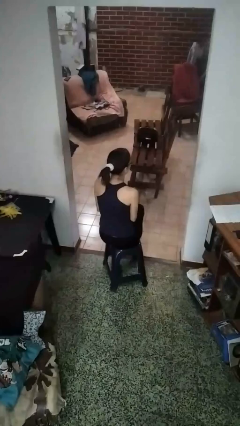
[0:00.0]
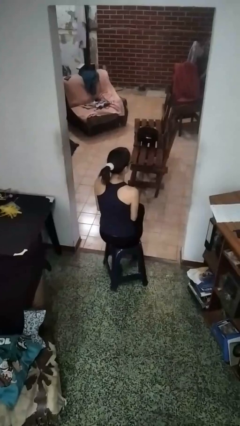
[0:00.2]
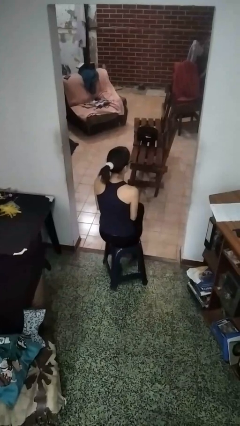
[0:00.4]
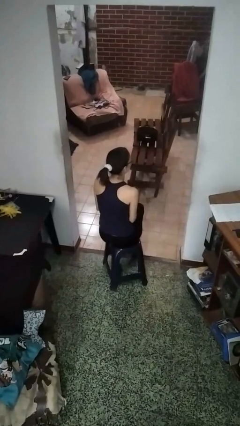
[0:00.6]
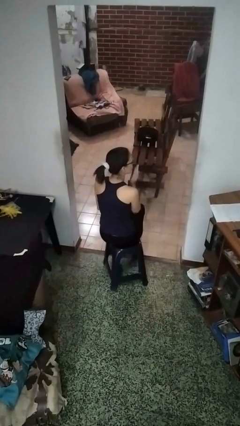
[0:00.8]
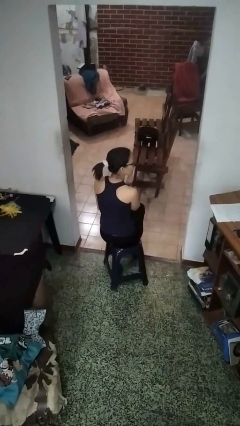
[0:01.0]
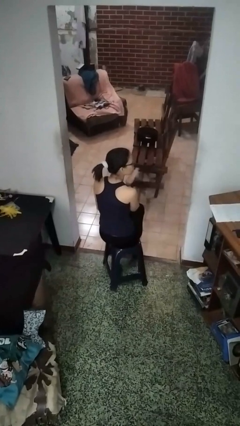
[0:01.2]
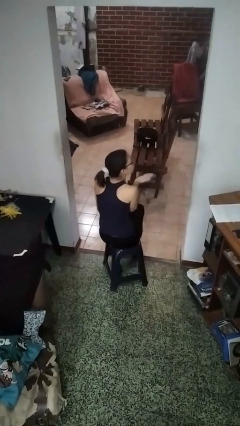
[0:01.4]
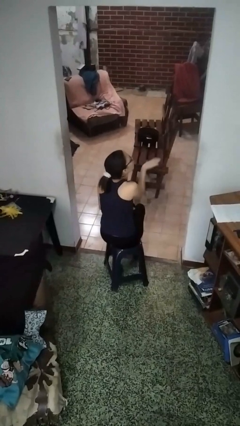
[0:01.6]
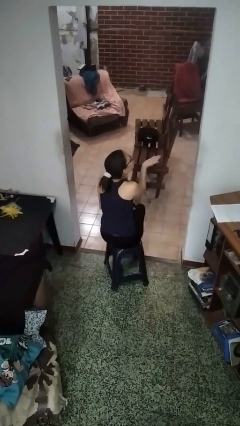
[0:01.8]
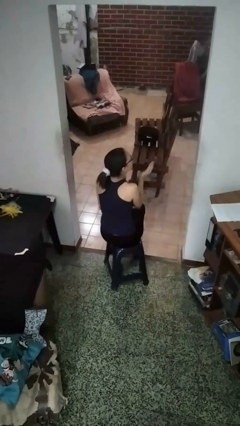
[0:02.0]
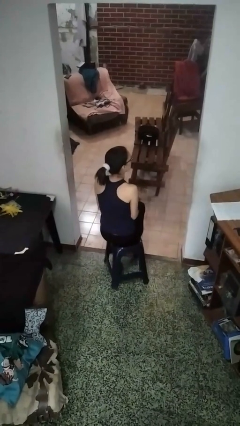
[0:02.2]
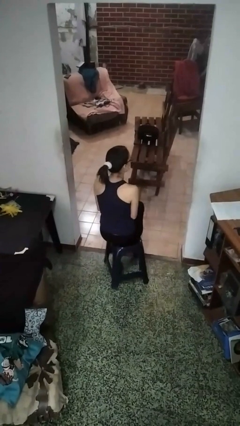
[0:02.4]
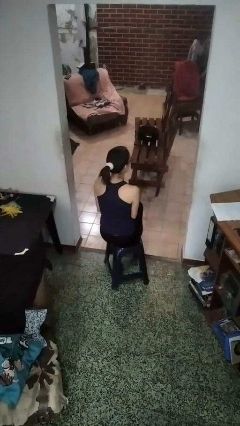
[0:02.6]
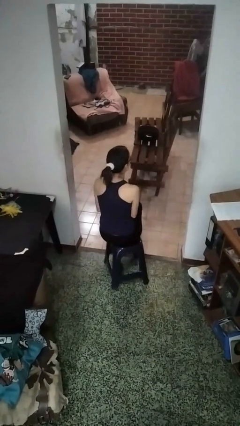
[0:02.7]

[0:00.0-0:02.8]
person gestures blow kiss

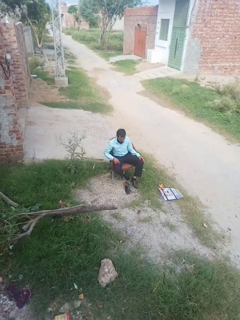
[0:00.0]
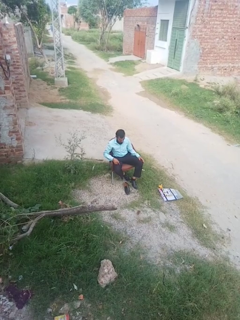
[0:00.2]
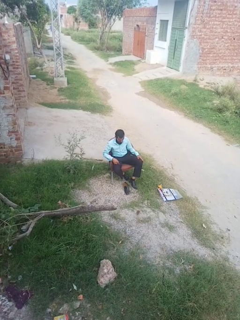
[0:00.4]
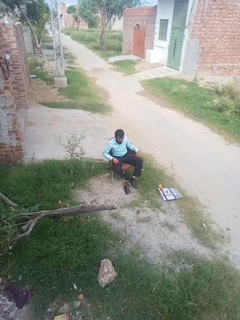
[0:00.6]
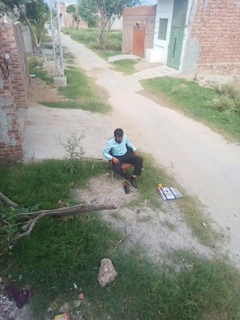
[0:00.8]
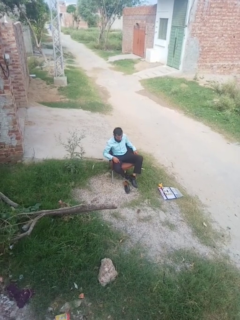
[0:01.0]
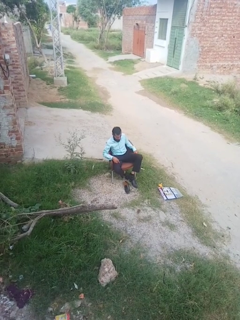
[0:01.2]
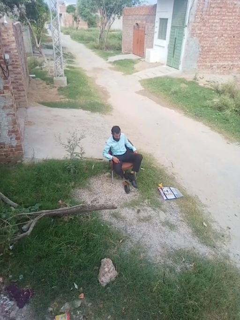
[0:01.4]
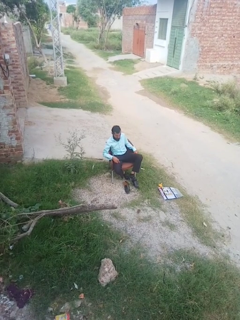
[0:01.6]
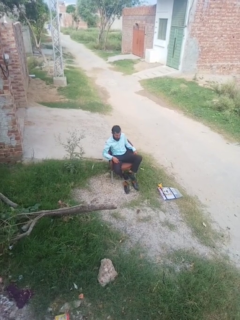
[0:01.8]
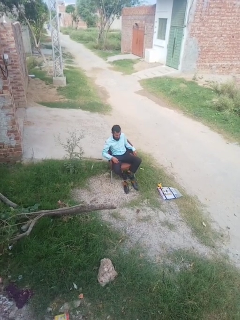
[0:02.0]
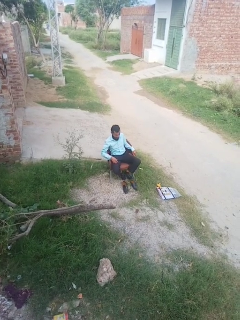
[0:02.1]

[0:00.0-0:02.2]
person takes off shoes

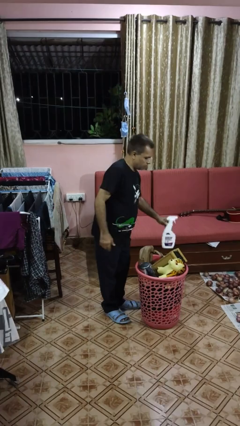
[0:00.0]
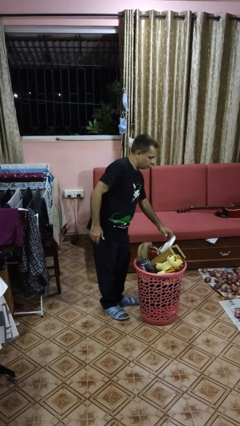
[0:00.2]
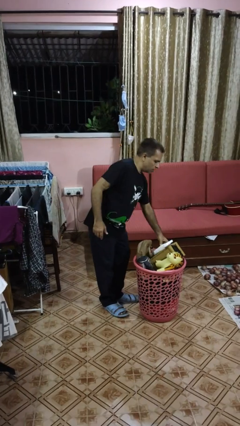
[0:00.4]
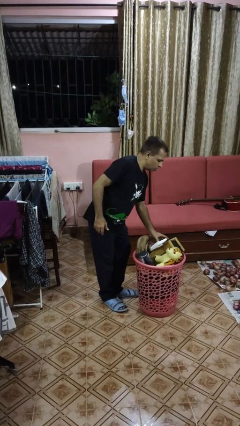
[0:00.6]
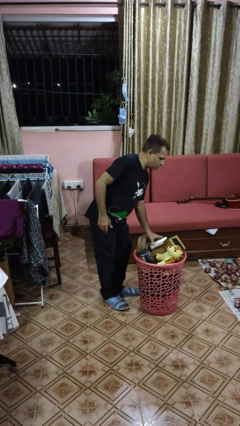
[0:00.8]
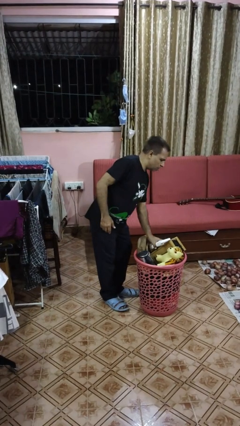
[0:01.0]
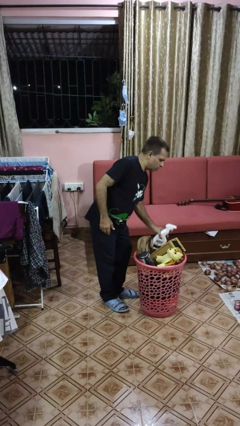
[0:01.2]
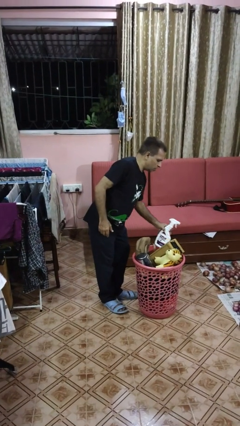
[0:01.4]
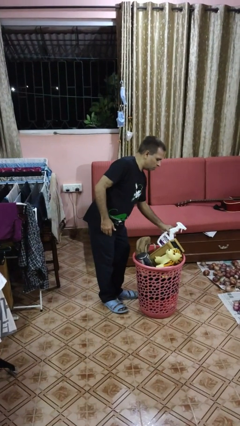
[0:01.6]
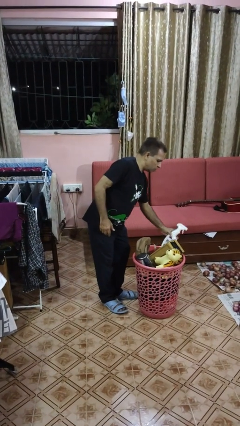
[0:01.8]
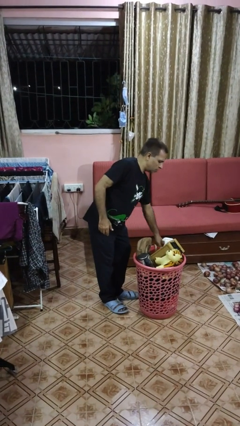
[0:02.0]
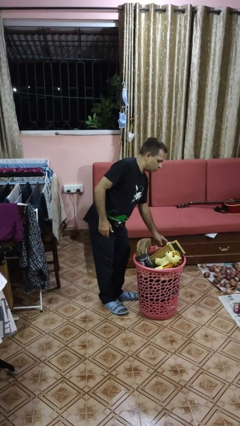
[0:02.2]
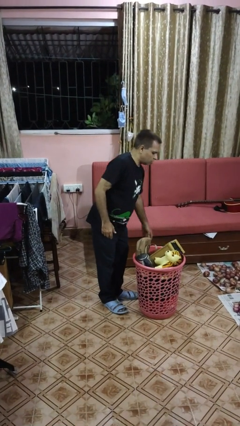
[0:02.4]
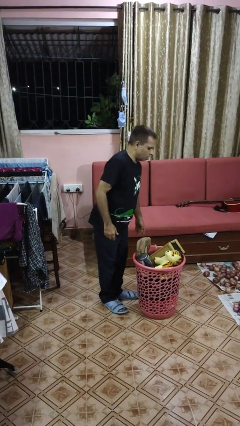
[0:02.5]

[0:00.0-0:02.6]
person puts object into basket

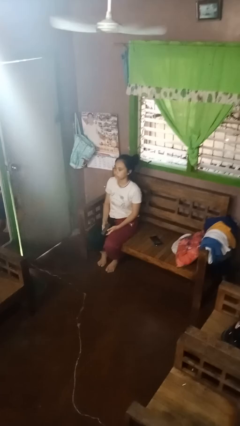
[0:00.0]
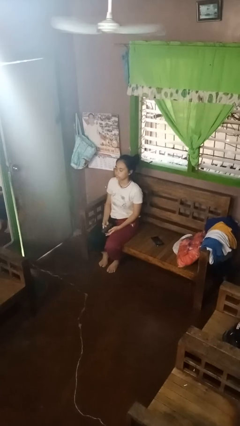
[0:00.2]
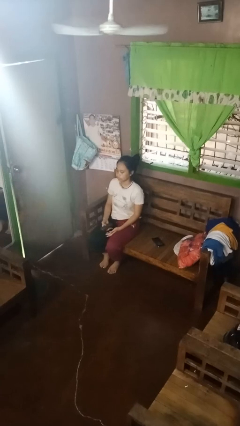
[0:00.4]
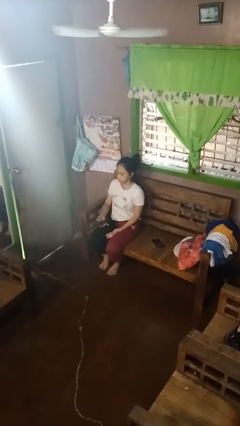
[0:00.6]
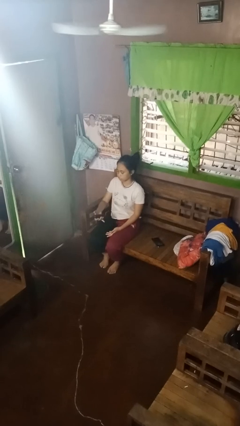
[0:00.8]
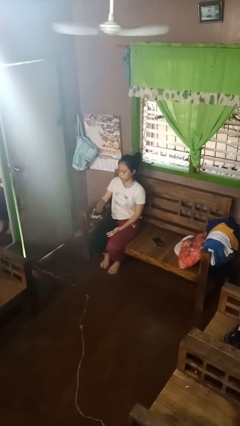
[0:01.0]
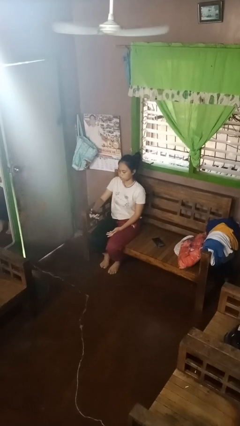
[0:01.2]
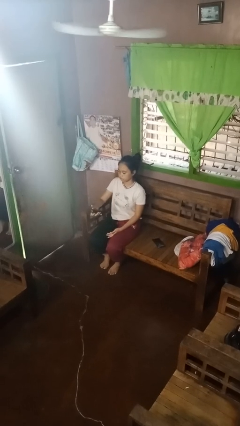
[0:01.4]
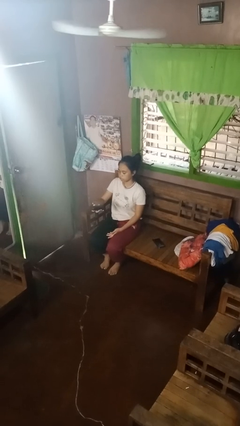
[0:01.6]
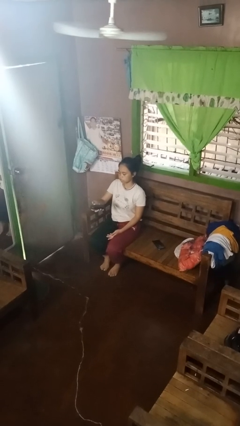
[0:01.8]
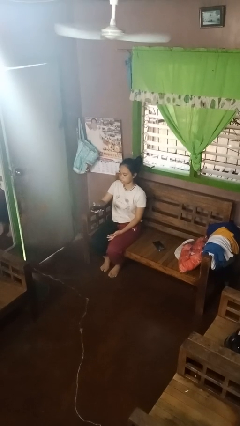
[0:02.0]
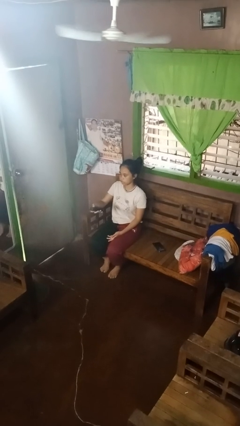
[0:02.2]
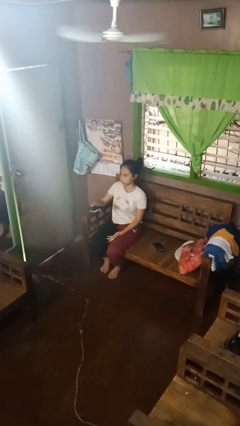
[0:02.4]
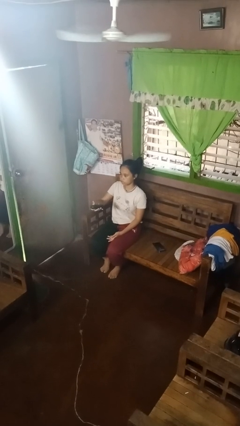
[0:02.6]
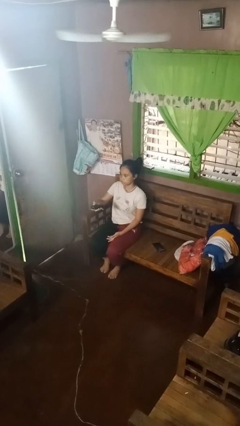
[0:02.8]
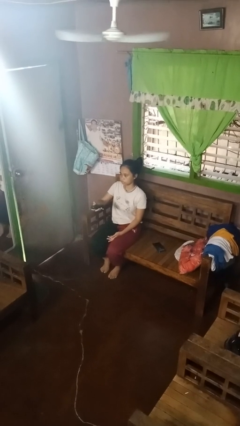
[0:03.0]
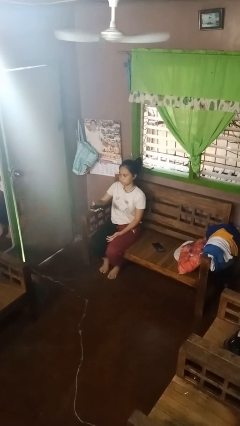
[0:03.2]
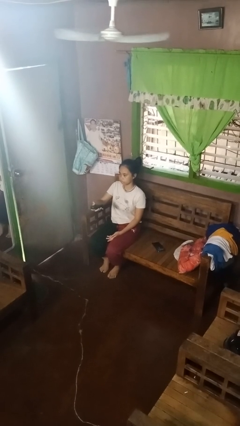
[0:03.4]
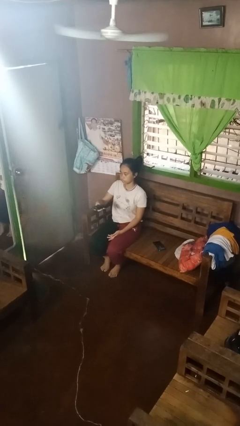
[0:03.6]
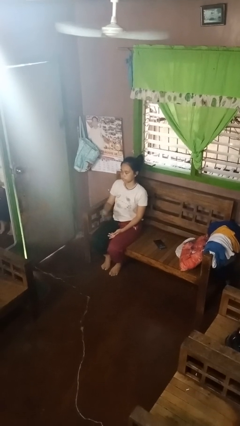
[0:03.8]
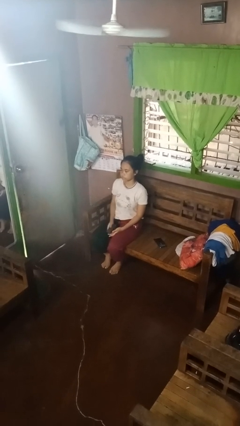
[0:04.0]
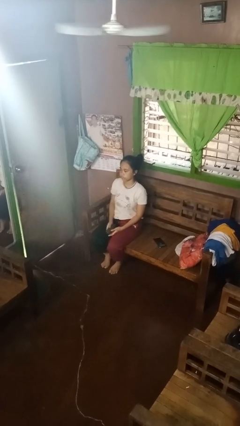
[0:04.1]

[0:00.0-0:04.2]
person uses television remote

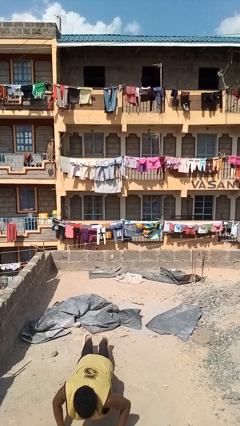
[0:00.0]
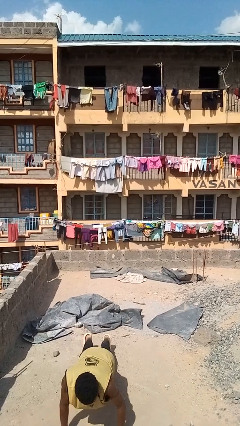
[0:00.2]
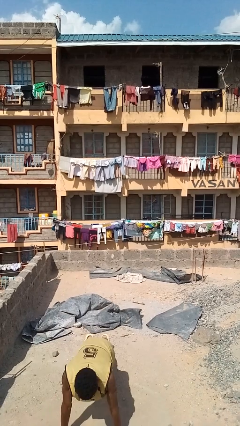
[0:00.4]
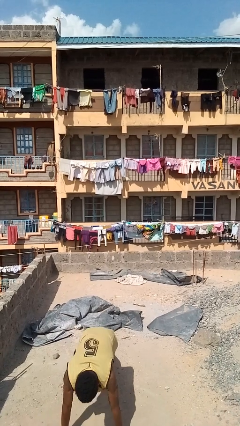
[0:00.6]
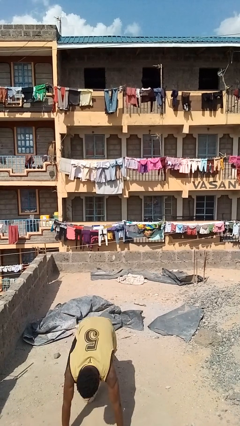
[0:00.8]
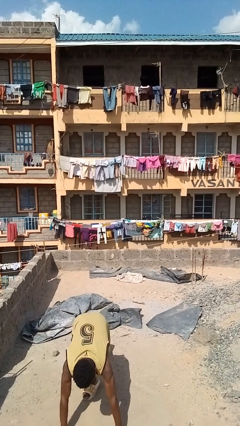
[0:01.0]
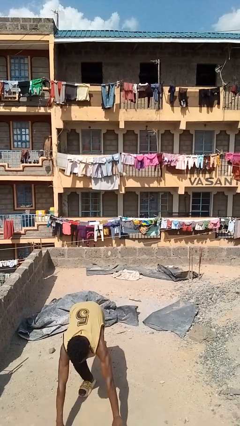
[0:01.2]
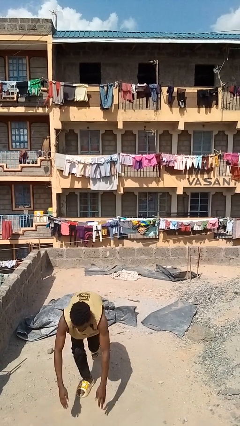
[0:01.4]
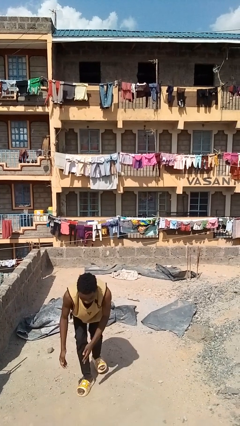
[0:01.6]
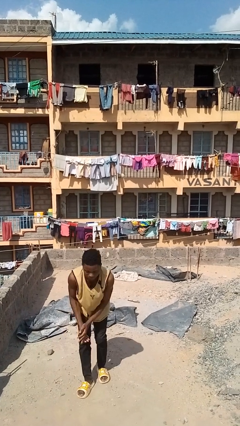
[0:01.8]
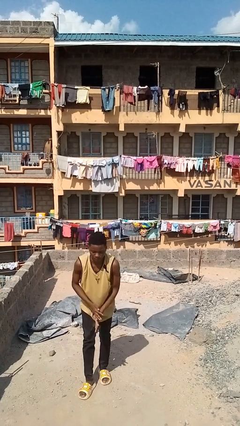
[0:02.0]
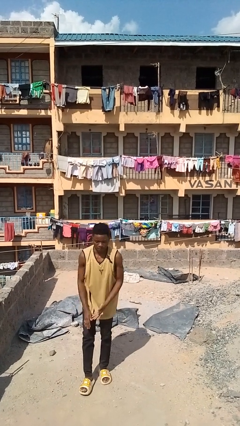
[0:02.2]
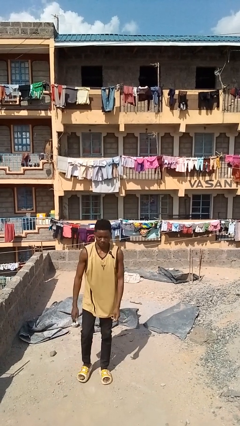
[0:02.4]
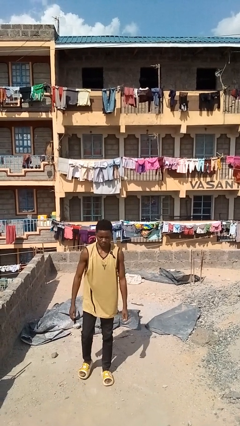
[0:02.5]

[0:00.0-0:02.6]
person stands up from floor

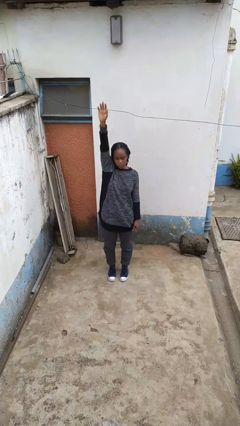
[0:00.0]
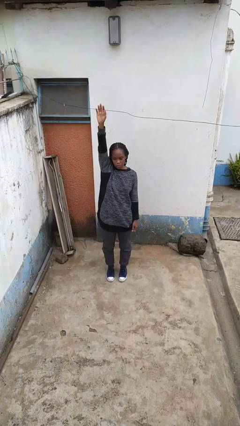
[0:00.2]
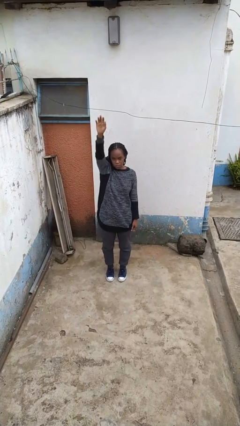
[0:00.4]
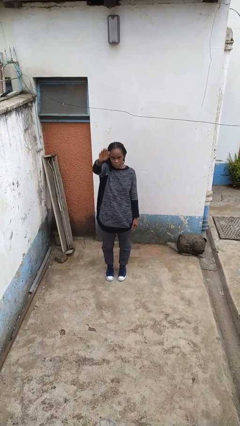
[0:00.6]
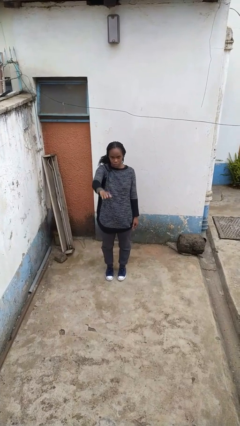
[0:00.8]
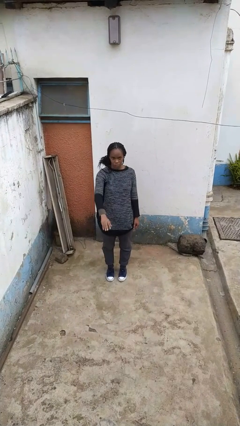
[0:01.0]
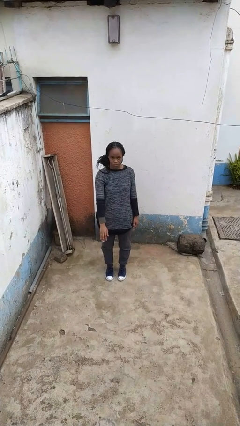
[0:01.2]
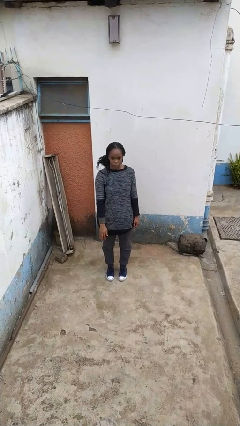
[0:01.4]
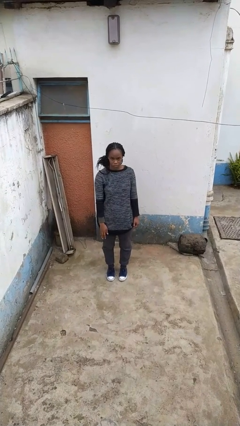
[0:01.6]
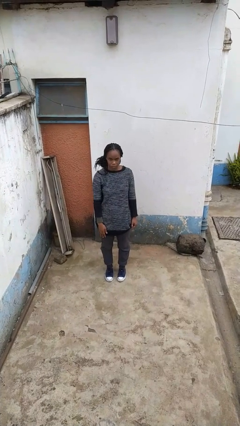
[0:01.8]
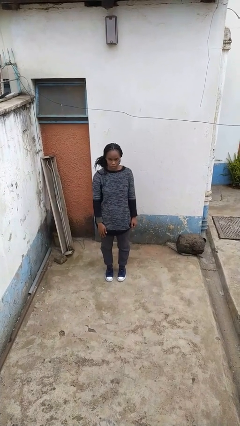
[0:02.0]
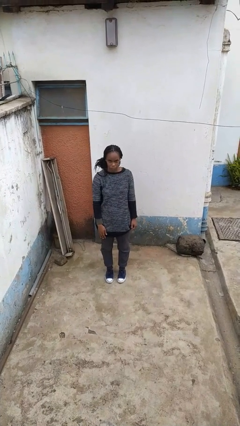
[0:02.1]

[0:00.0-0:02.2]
person gestures lower hand

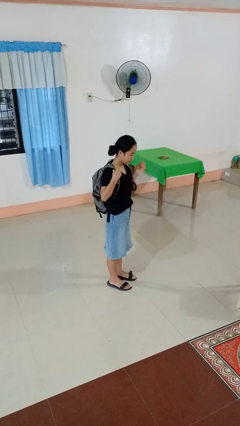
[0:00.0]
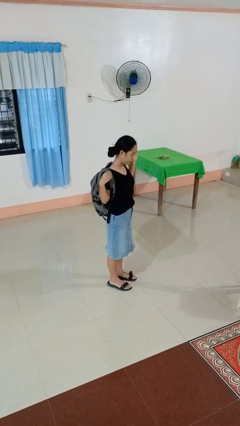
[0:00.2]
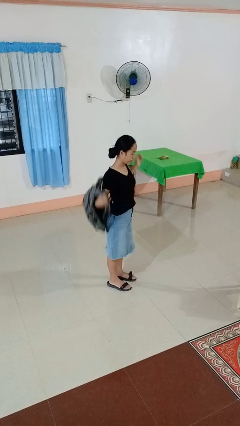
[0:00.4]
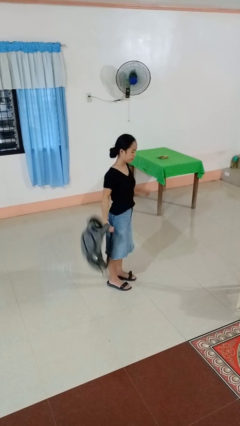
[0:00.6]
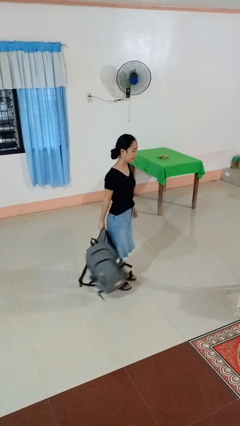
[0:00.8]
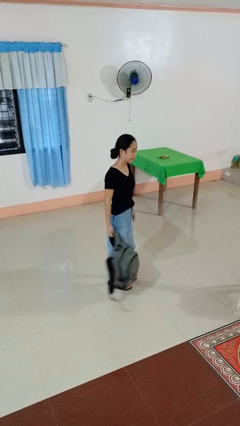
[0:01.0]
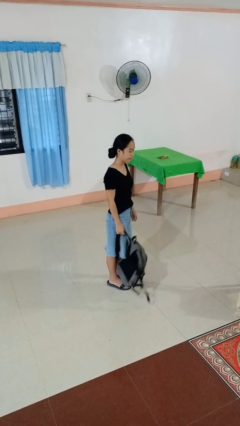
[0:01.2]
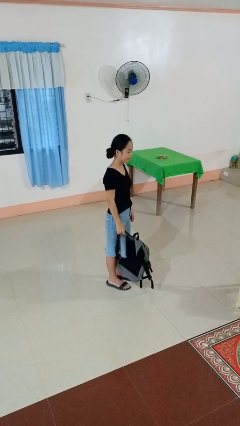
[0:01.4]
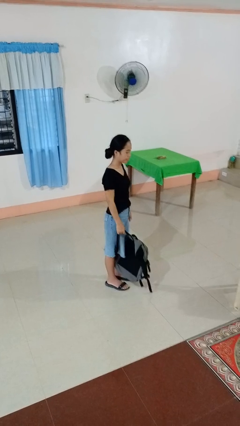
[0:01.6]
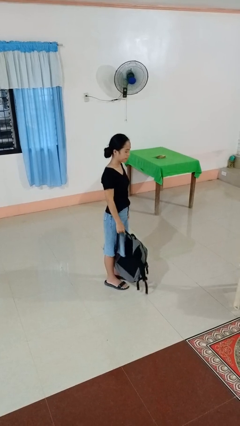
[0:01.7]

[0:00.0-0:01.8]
person takes off backpack
